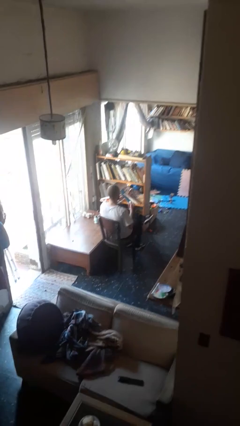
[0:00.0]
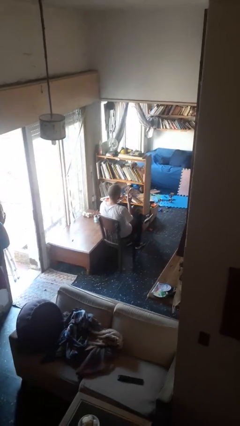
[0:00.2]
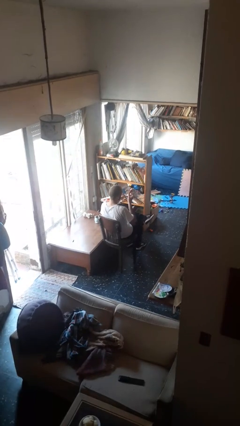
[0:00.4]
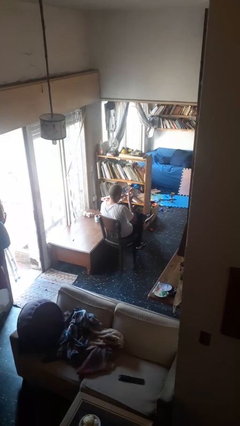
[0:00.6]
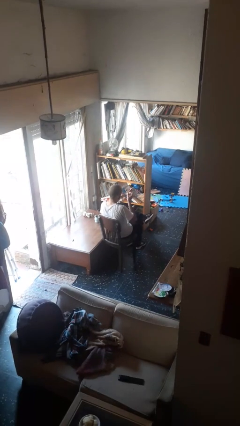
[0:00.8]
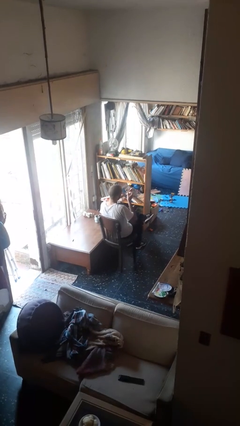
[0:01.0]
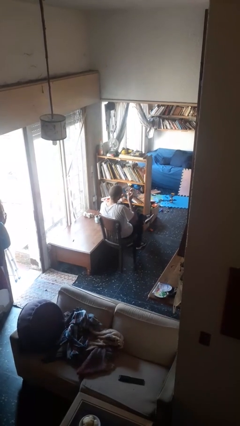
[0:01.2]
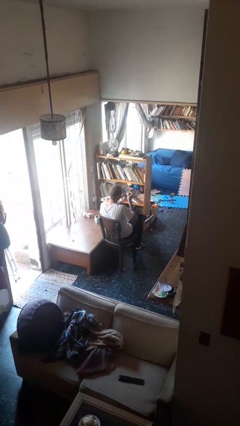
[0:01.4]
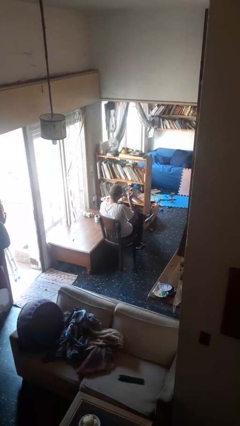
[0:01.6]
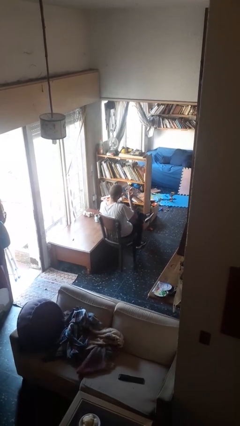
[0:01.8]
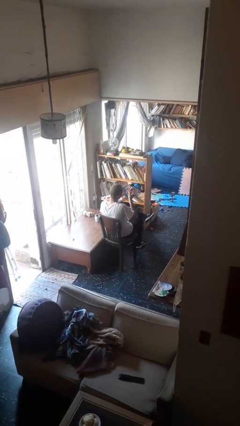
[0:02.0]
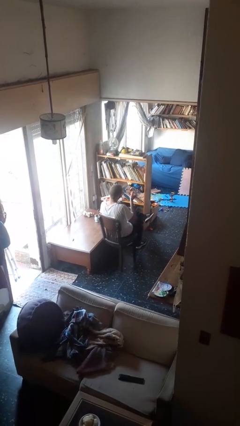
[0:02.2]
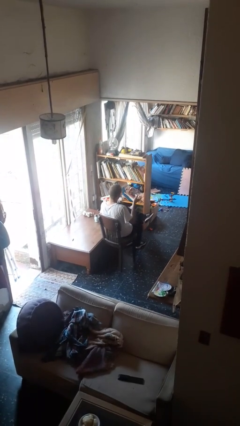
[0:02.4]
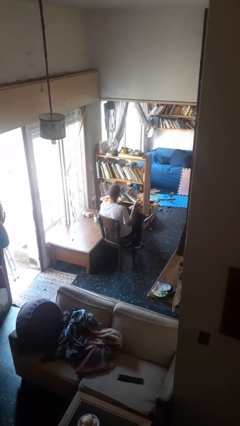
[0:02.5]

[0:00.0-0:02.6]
person clips fingernails

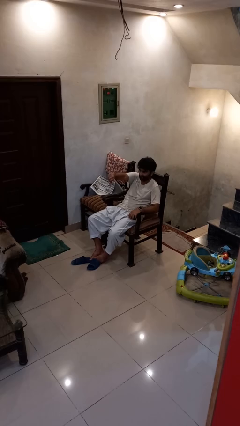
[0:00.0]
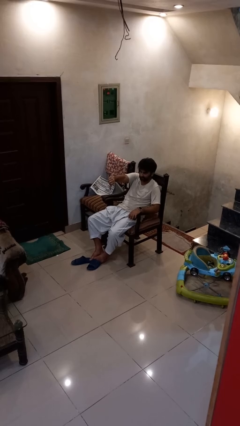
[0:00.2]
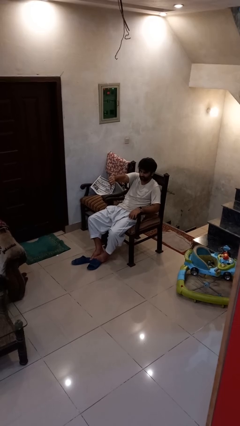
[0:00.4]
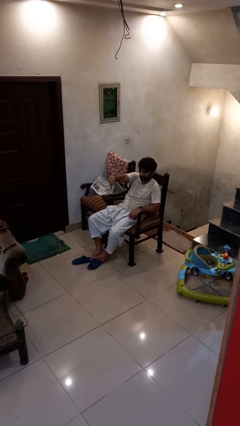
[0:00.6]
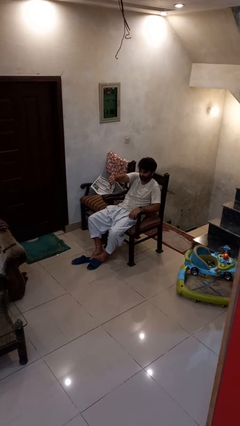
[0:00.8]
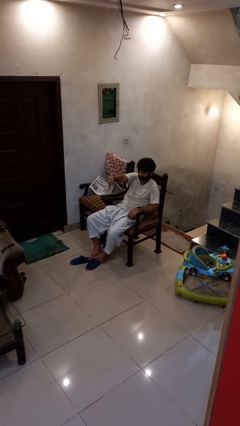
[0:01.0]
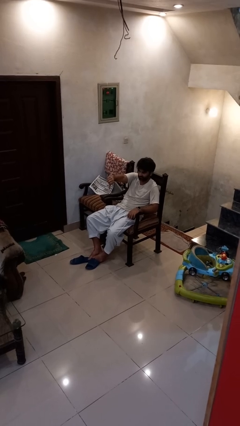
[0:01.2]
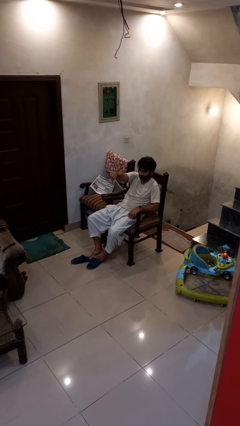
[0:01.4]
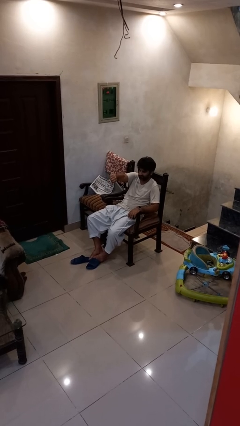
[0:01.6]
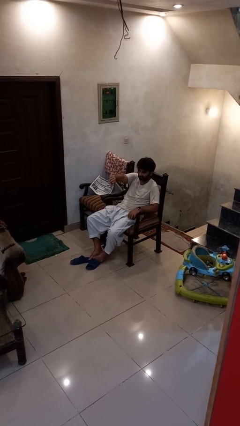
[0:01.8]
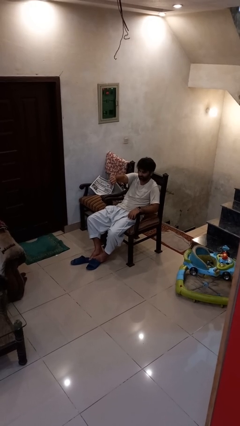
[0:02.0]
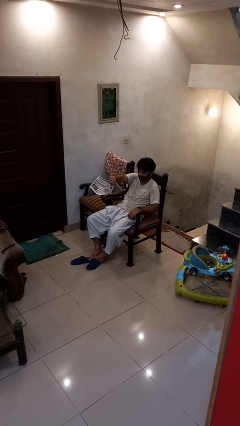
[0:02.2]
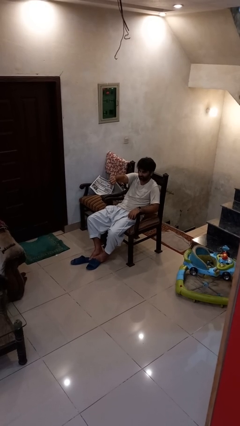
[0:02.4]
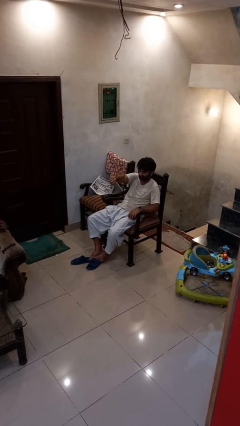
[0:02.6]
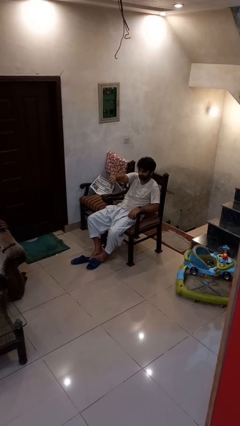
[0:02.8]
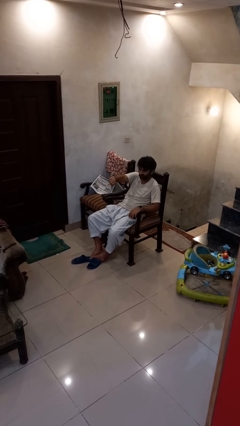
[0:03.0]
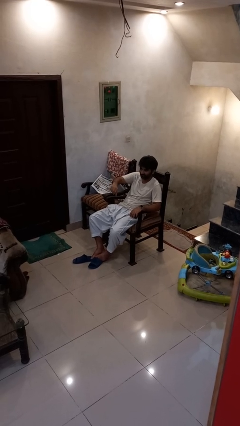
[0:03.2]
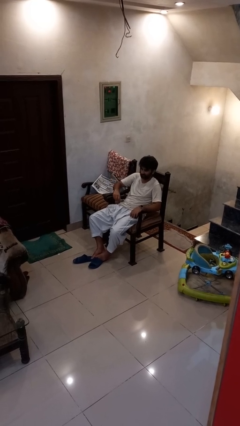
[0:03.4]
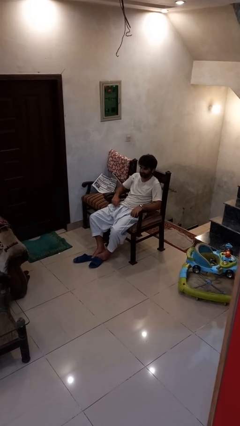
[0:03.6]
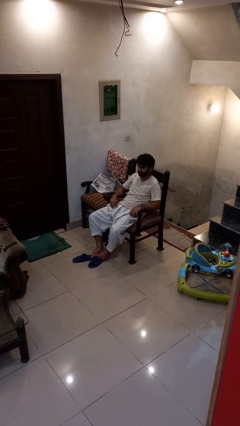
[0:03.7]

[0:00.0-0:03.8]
person gestures thumbs down

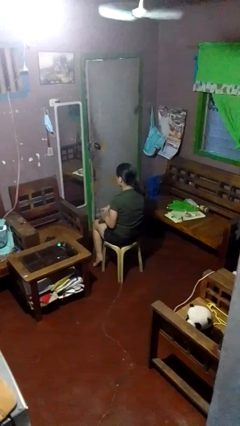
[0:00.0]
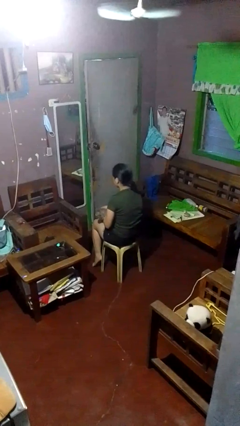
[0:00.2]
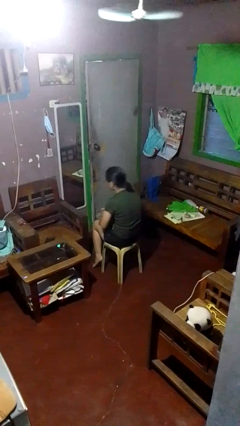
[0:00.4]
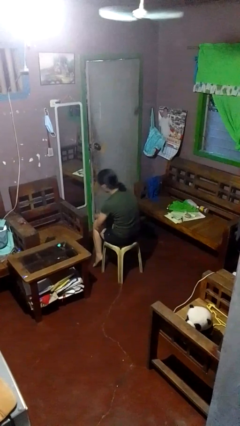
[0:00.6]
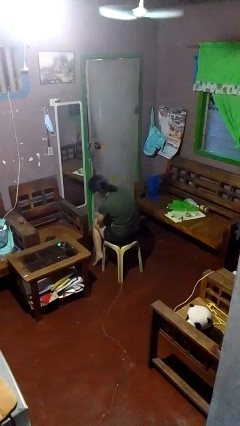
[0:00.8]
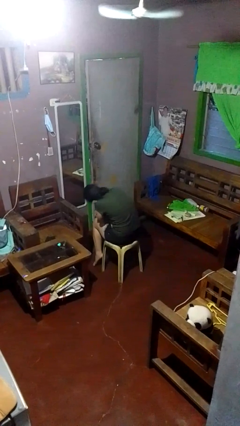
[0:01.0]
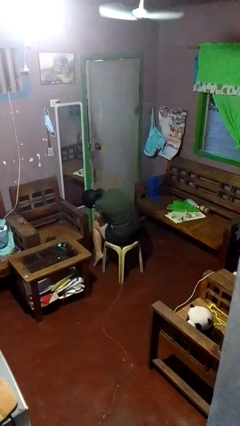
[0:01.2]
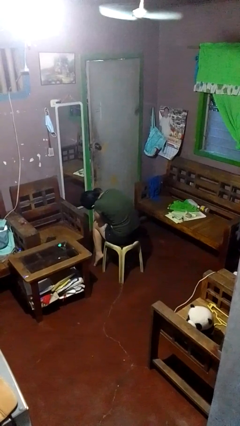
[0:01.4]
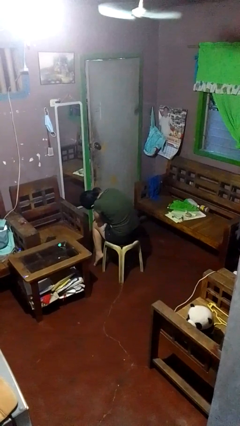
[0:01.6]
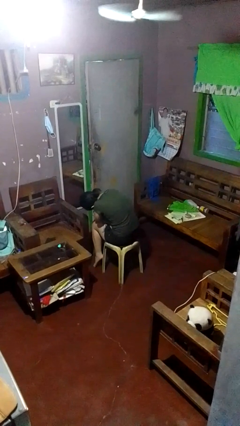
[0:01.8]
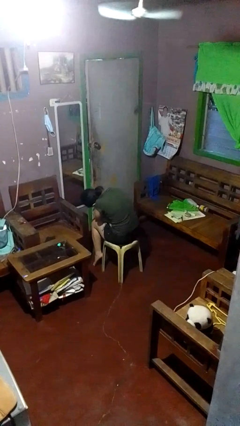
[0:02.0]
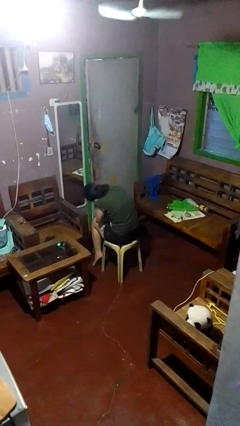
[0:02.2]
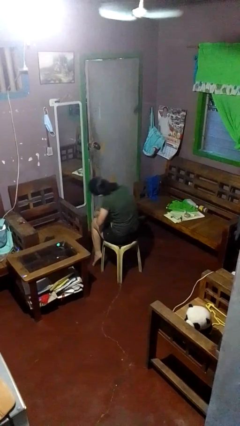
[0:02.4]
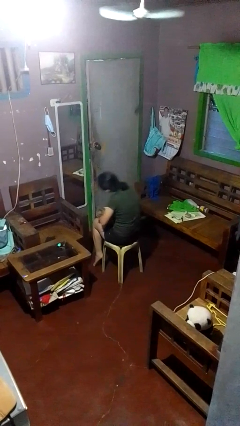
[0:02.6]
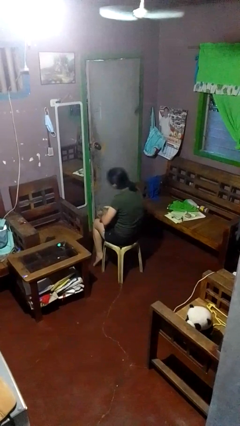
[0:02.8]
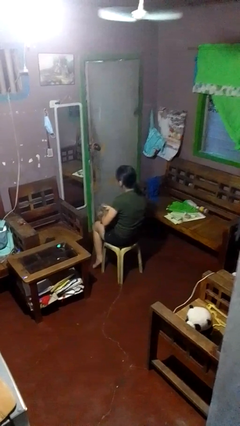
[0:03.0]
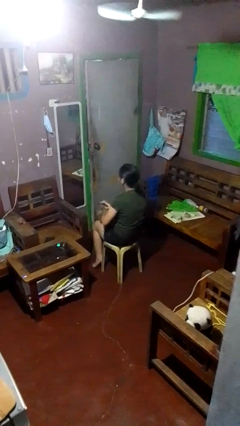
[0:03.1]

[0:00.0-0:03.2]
person hugs cat

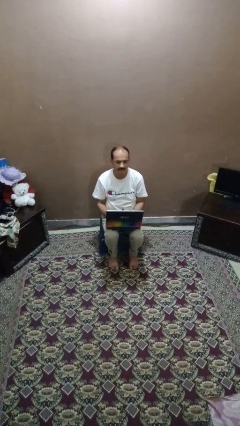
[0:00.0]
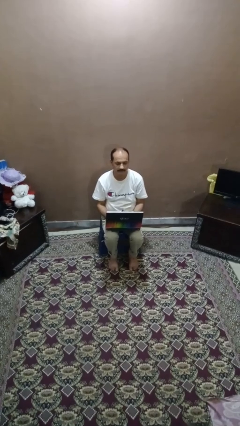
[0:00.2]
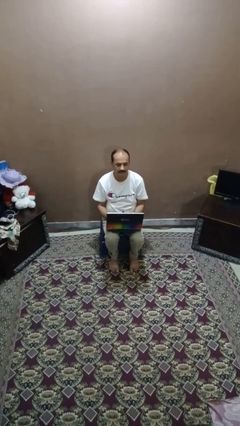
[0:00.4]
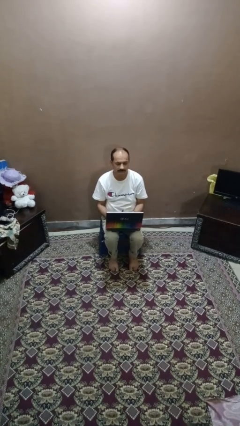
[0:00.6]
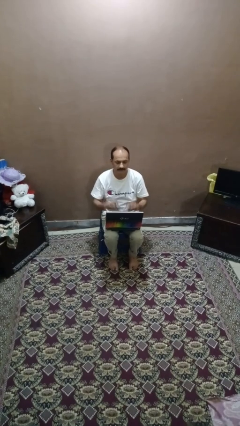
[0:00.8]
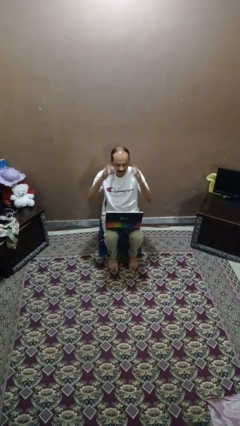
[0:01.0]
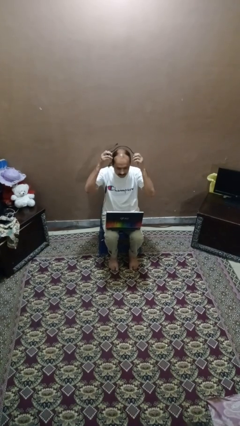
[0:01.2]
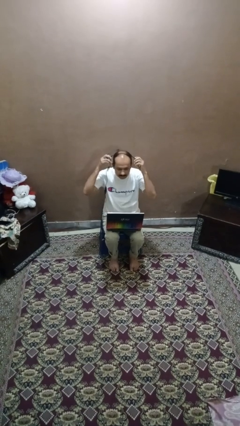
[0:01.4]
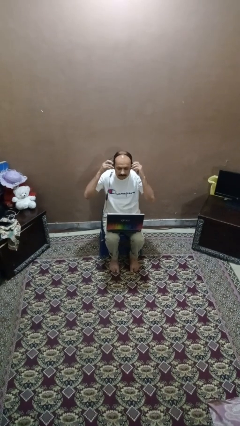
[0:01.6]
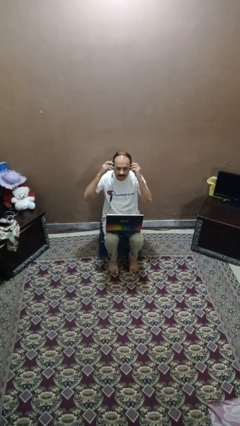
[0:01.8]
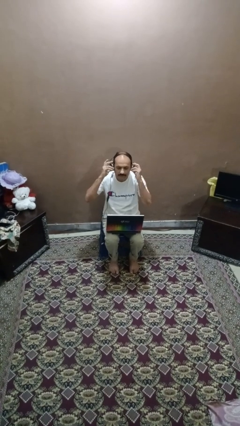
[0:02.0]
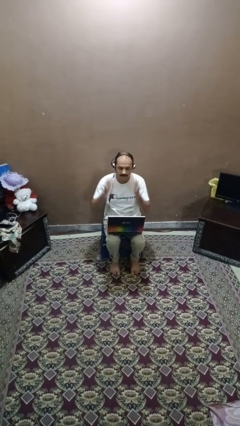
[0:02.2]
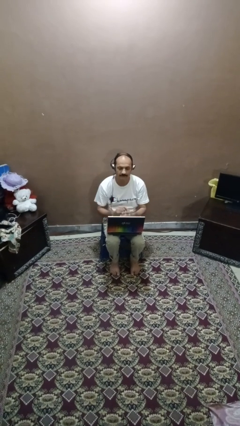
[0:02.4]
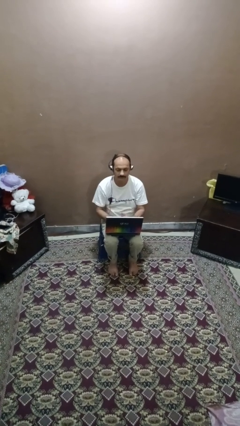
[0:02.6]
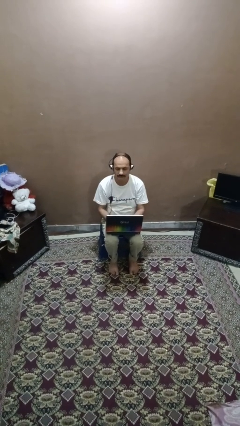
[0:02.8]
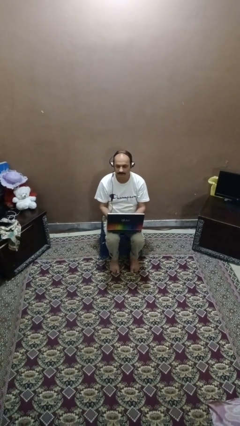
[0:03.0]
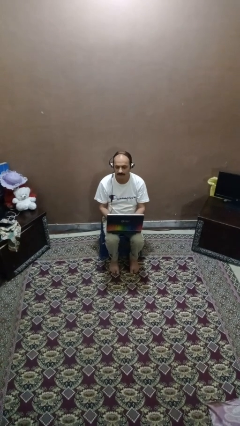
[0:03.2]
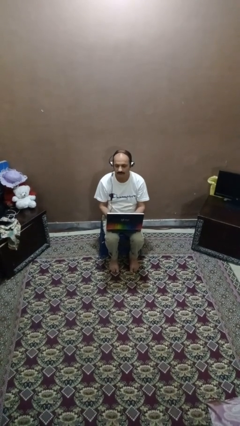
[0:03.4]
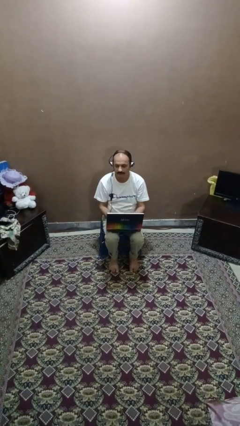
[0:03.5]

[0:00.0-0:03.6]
person puts on headphones

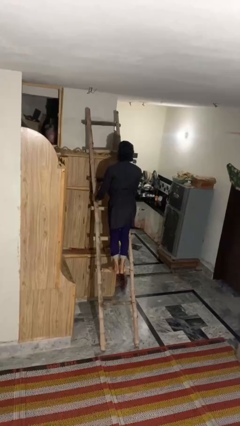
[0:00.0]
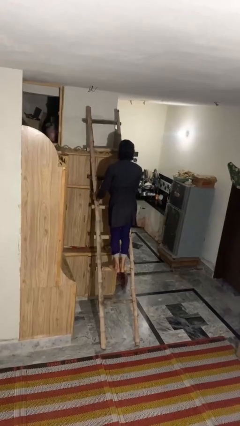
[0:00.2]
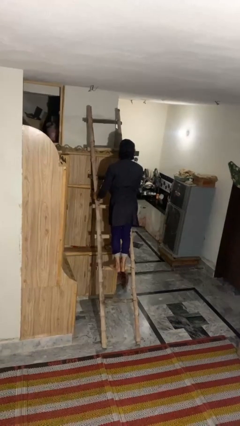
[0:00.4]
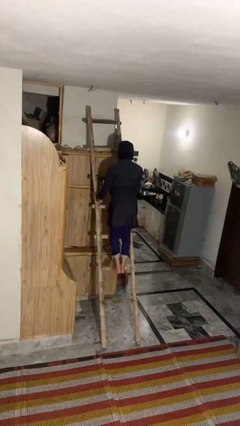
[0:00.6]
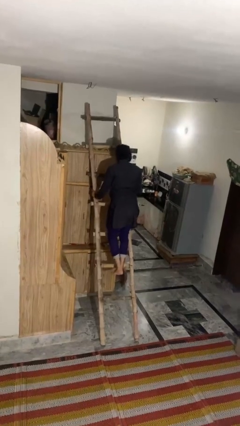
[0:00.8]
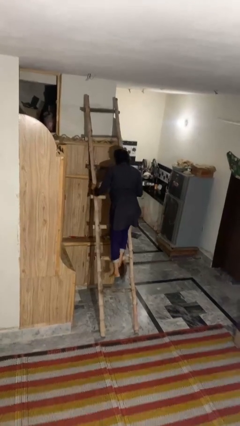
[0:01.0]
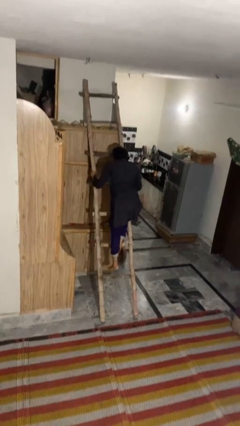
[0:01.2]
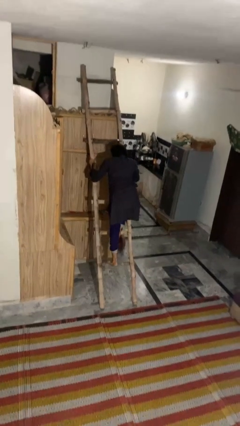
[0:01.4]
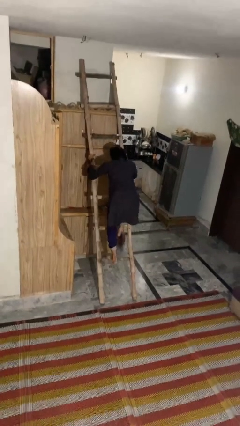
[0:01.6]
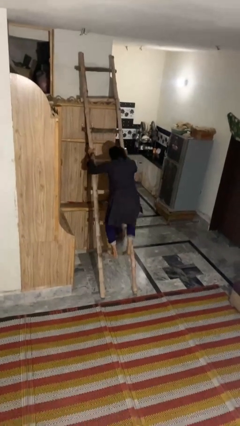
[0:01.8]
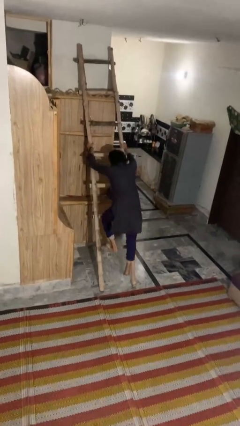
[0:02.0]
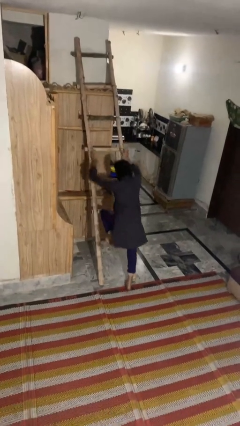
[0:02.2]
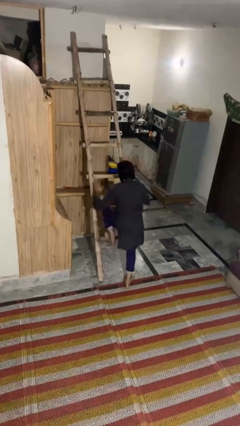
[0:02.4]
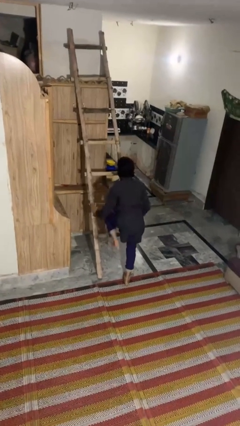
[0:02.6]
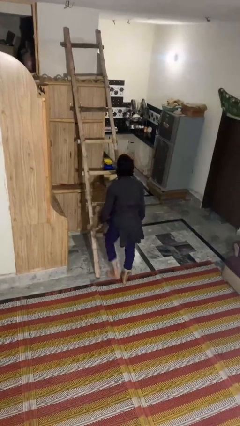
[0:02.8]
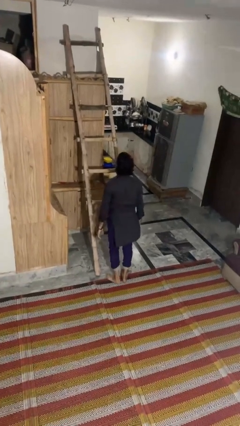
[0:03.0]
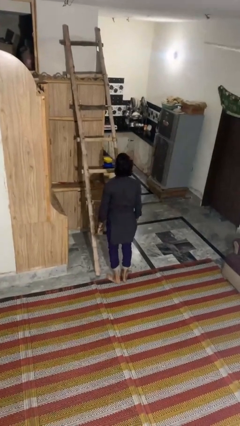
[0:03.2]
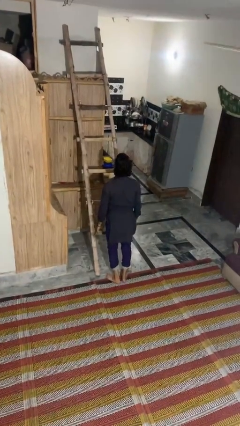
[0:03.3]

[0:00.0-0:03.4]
person climbs down ladder

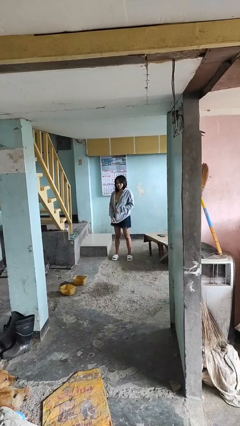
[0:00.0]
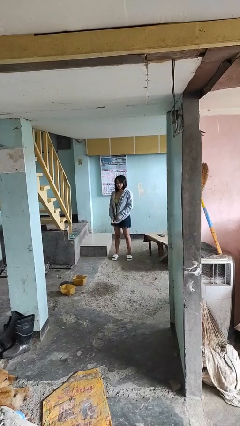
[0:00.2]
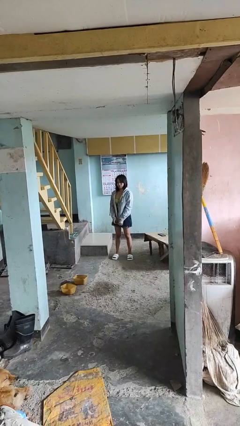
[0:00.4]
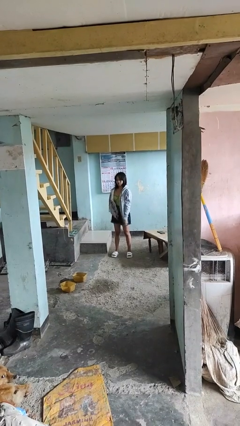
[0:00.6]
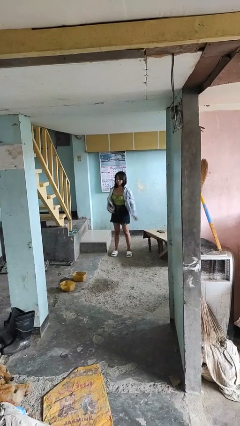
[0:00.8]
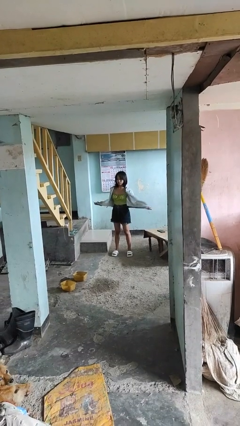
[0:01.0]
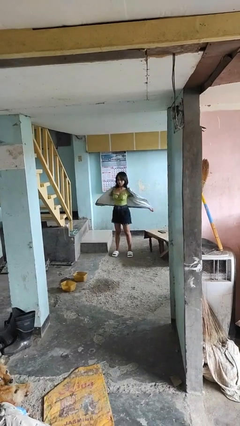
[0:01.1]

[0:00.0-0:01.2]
person unzips jacket
